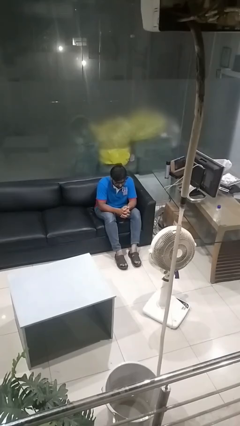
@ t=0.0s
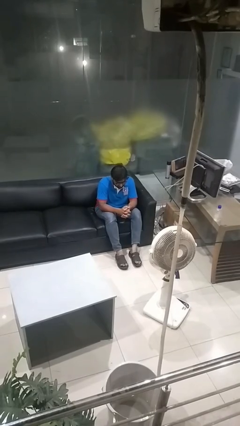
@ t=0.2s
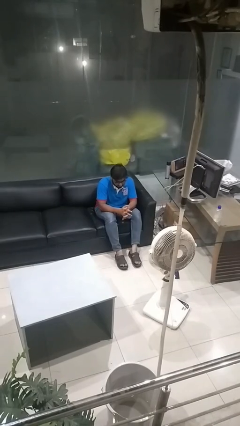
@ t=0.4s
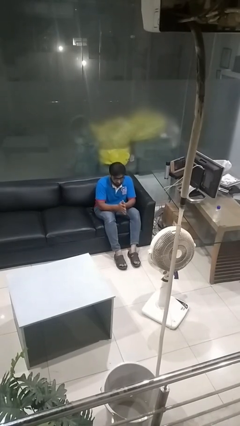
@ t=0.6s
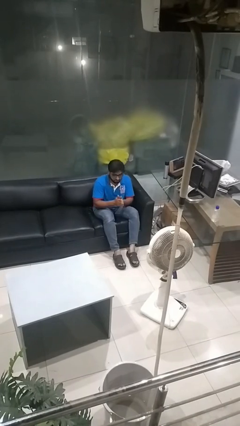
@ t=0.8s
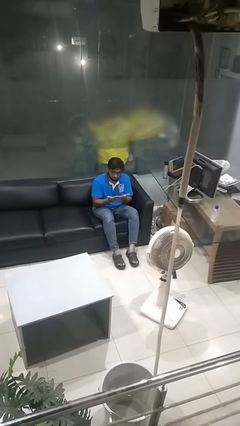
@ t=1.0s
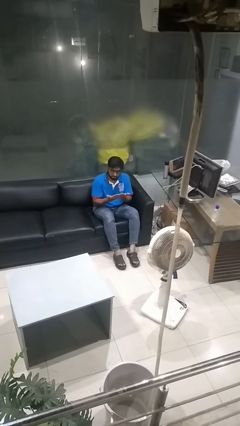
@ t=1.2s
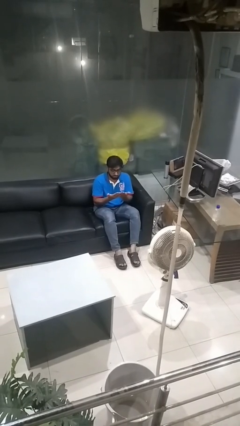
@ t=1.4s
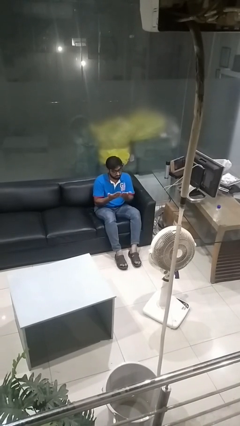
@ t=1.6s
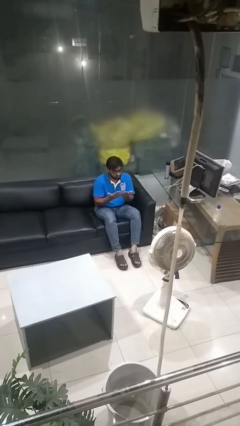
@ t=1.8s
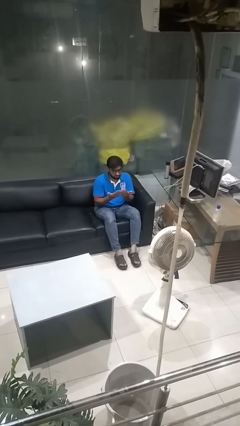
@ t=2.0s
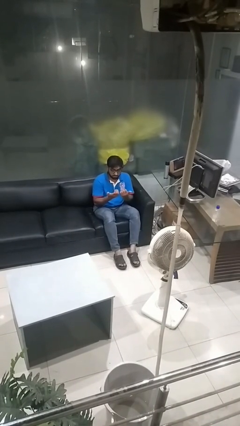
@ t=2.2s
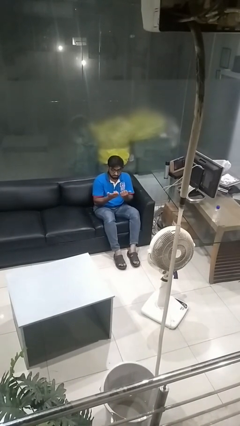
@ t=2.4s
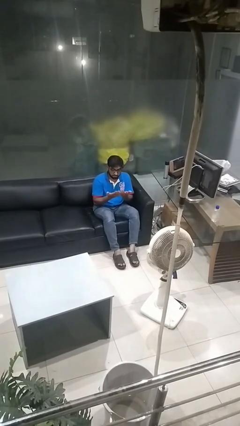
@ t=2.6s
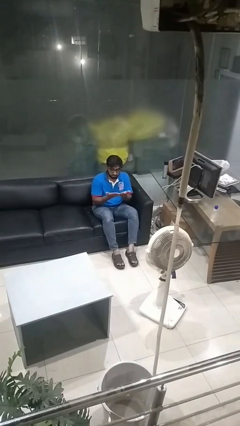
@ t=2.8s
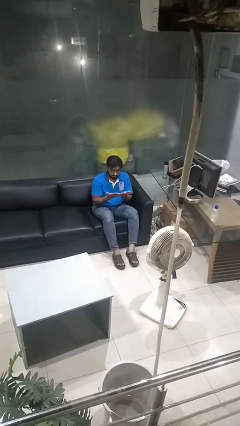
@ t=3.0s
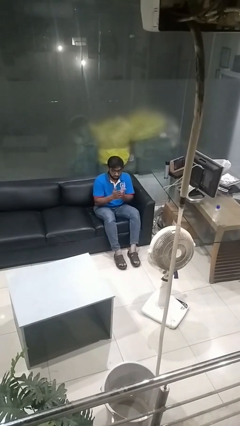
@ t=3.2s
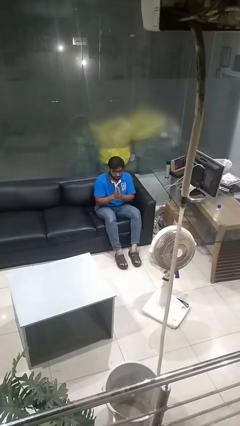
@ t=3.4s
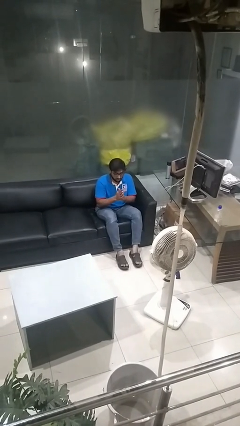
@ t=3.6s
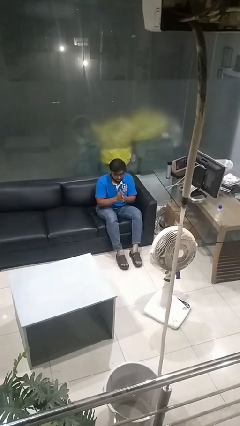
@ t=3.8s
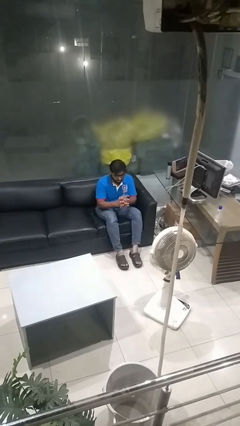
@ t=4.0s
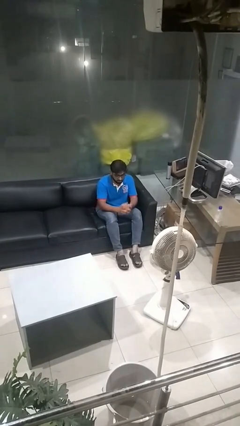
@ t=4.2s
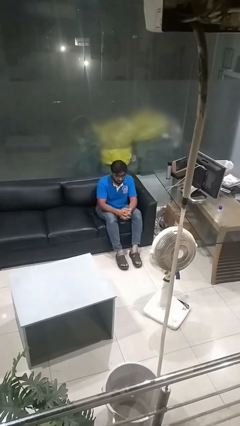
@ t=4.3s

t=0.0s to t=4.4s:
person looks at hands in lap

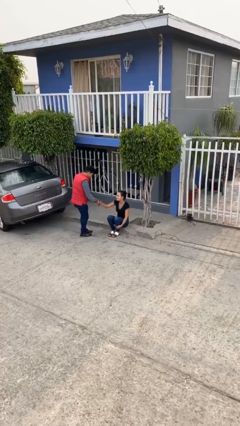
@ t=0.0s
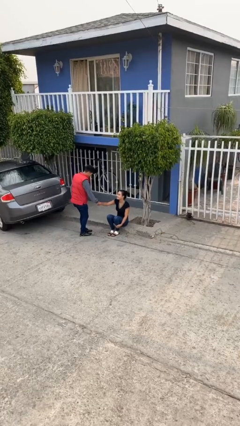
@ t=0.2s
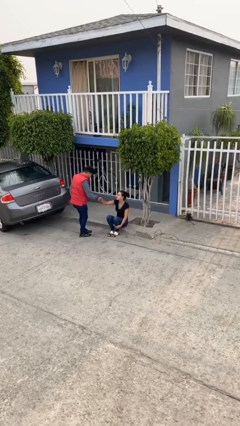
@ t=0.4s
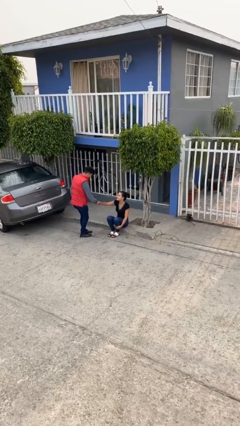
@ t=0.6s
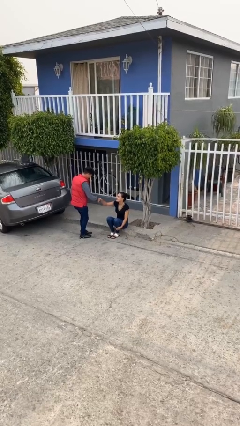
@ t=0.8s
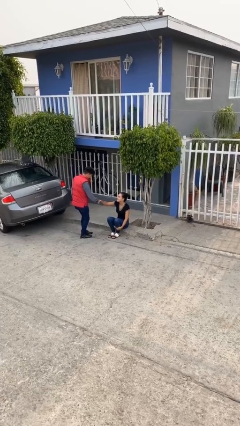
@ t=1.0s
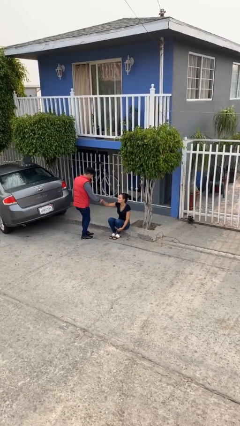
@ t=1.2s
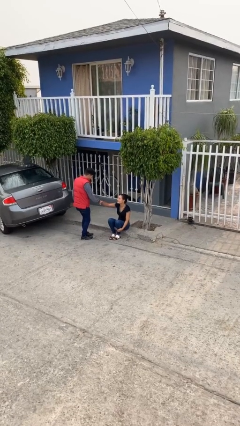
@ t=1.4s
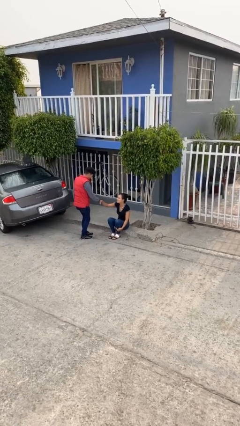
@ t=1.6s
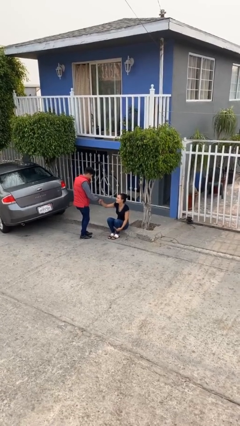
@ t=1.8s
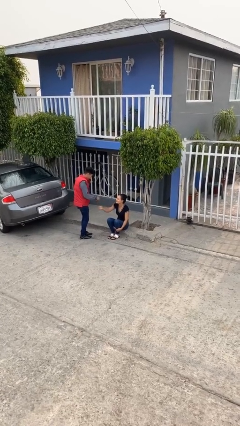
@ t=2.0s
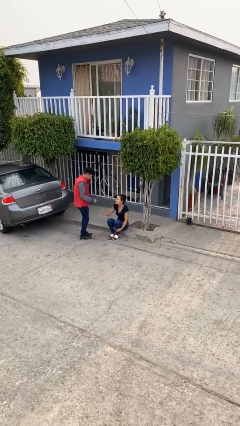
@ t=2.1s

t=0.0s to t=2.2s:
person shakes hand

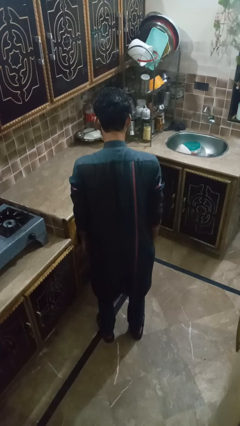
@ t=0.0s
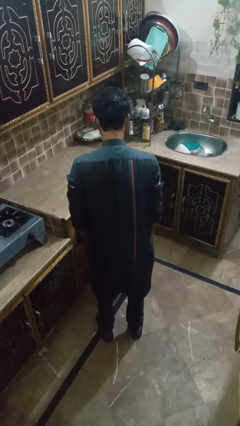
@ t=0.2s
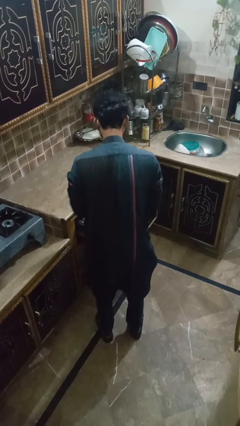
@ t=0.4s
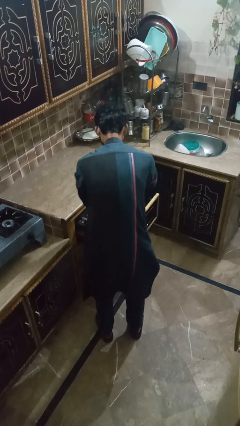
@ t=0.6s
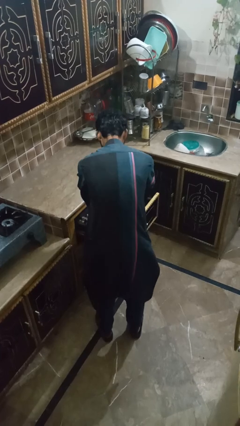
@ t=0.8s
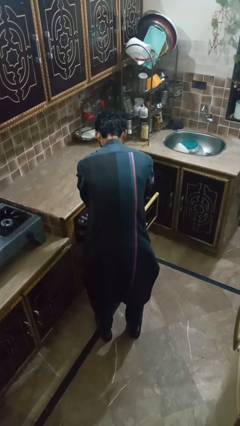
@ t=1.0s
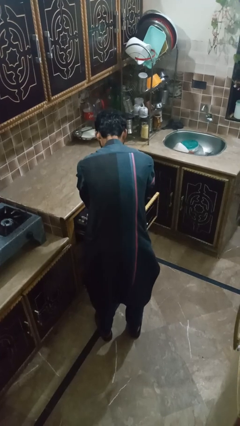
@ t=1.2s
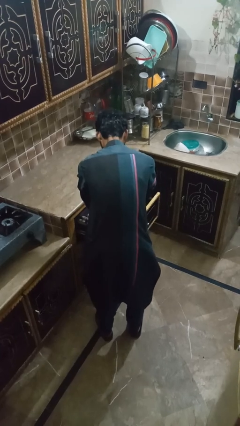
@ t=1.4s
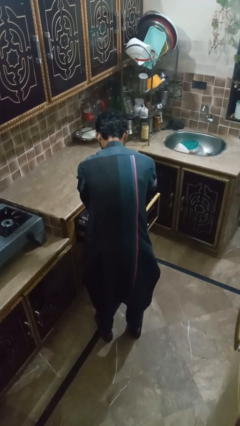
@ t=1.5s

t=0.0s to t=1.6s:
person searches in kitchen drawer

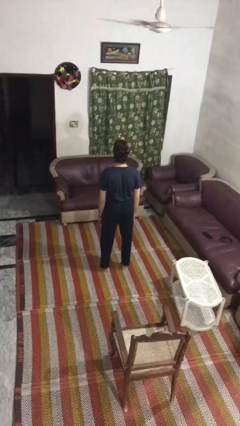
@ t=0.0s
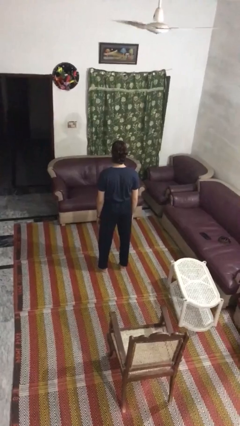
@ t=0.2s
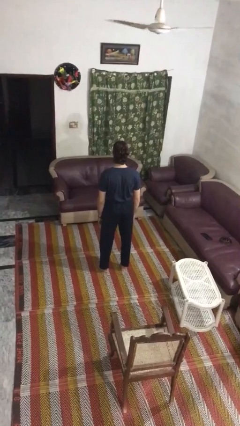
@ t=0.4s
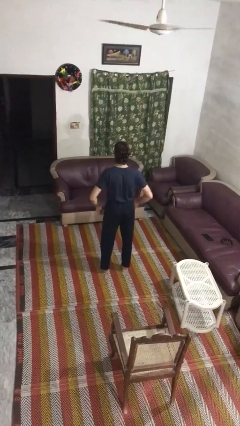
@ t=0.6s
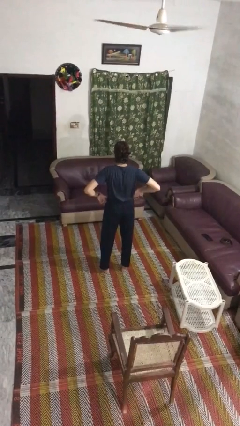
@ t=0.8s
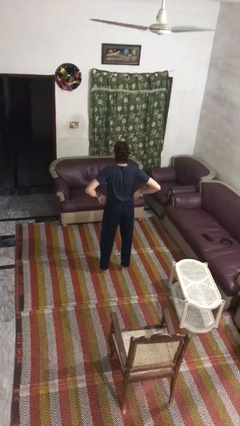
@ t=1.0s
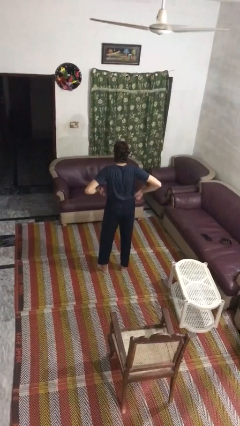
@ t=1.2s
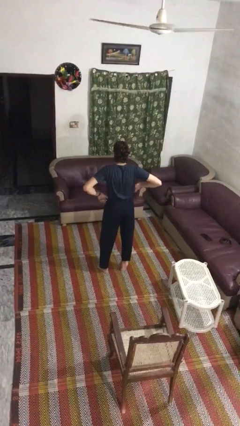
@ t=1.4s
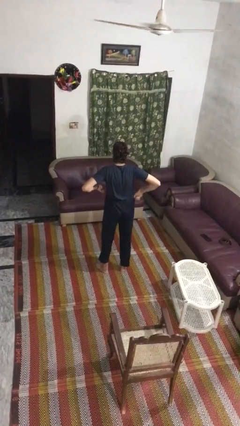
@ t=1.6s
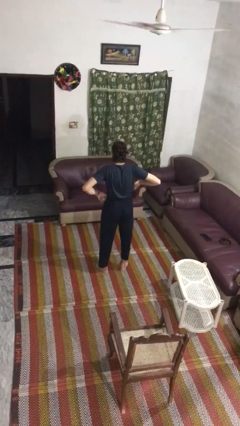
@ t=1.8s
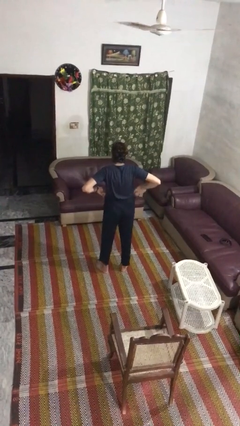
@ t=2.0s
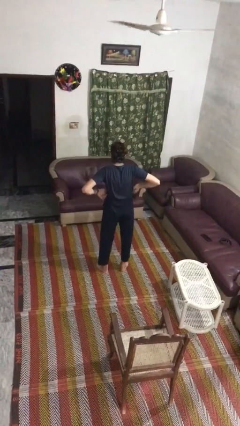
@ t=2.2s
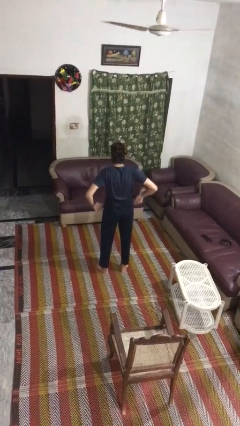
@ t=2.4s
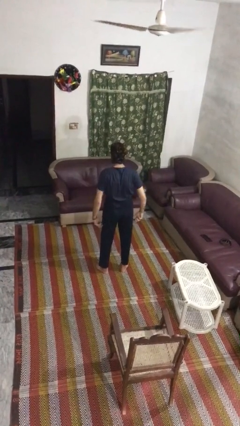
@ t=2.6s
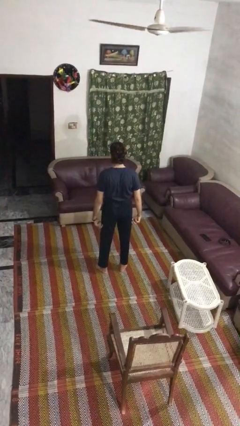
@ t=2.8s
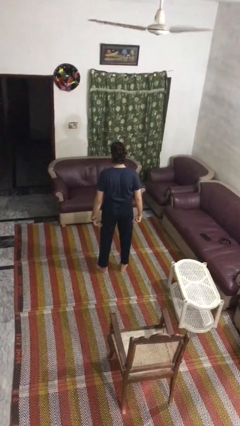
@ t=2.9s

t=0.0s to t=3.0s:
person hikes up pants

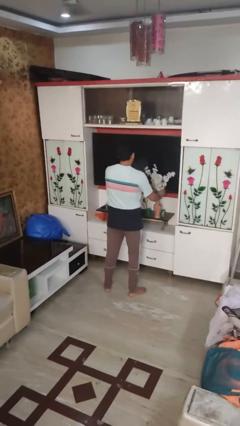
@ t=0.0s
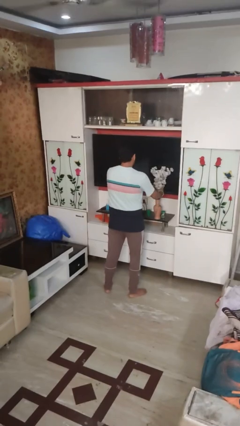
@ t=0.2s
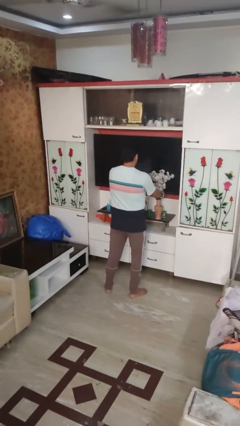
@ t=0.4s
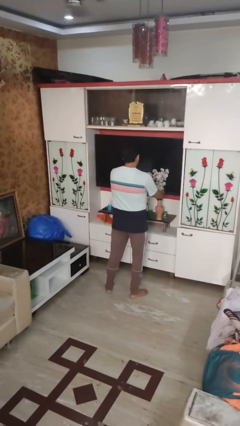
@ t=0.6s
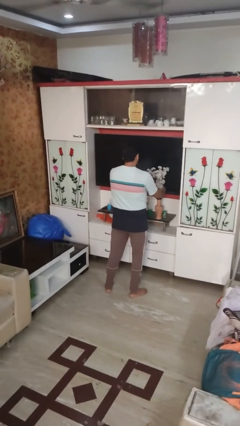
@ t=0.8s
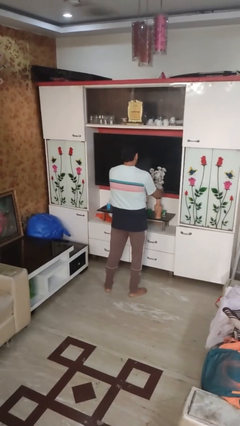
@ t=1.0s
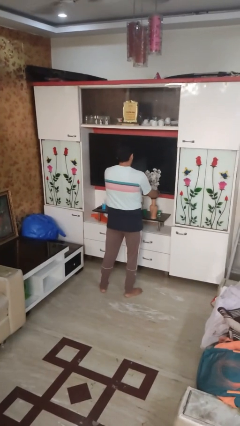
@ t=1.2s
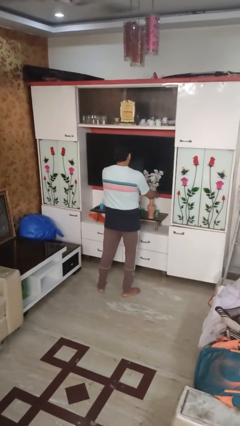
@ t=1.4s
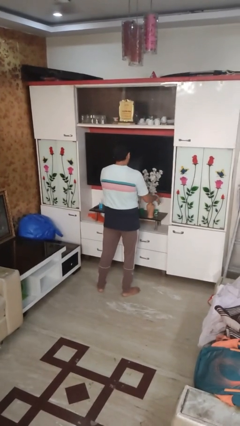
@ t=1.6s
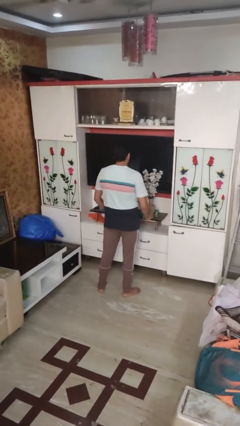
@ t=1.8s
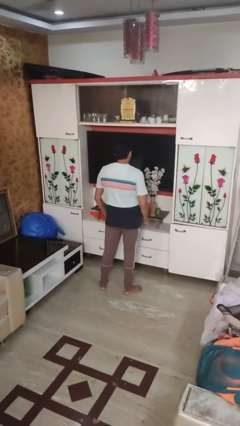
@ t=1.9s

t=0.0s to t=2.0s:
person arranges flowers in vase

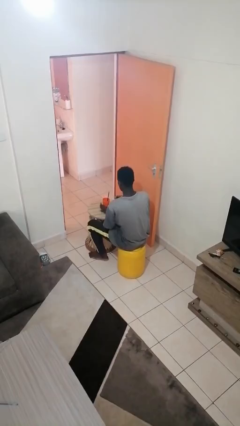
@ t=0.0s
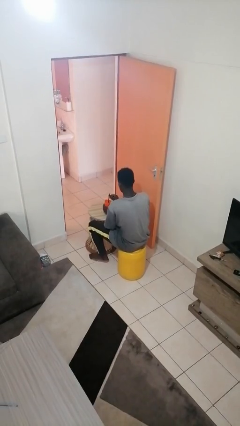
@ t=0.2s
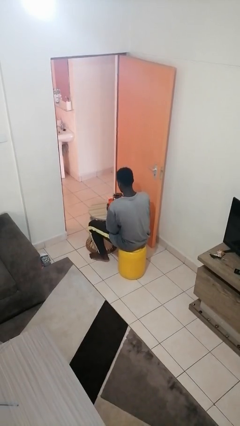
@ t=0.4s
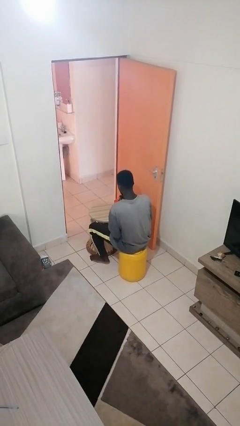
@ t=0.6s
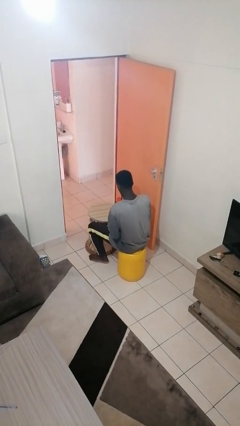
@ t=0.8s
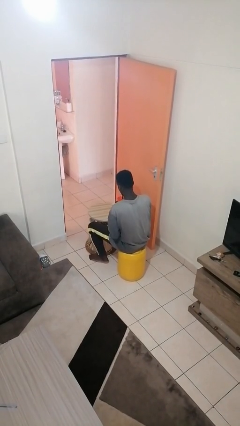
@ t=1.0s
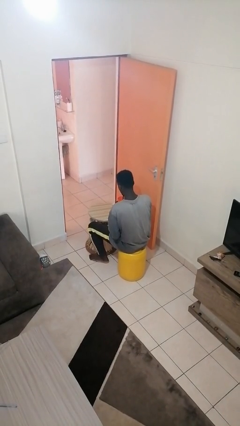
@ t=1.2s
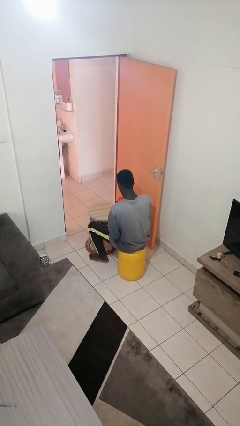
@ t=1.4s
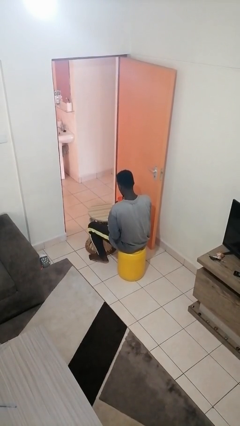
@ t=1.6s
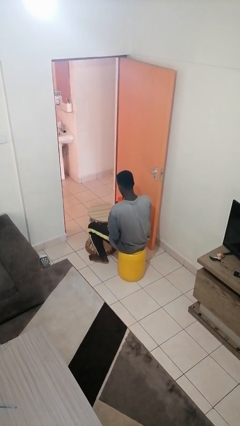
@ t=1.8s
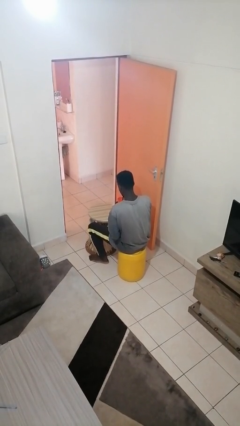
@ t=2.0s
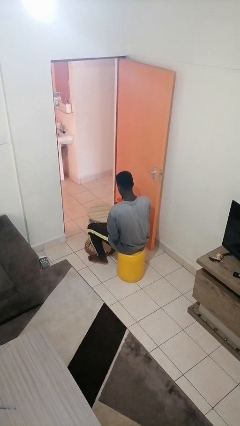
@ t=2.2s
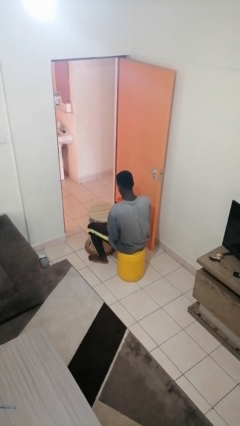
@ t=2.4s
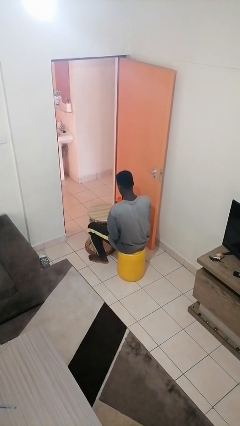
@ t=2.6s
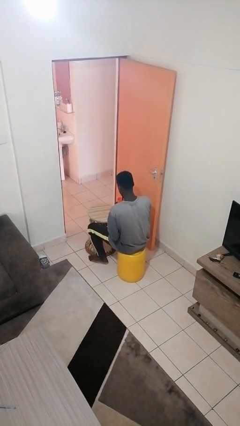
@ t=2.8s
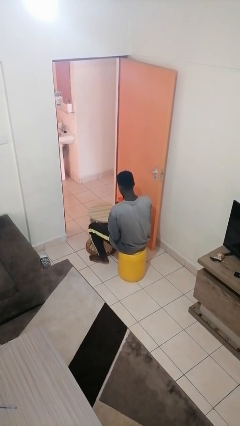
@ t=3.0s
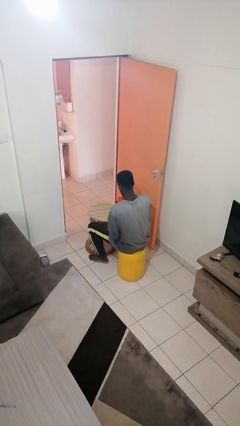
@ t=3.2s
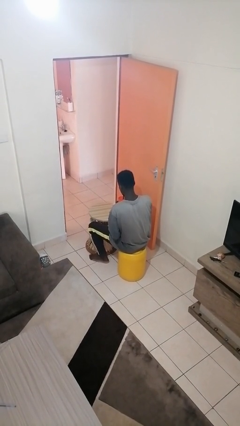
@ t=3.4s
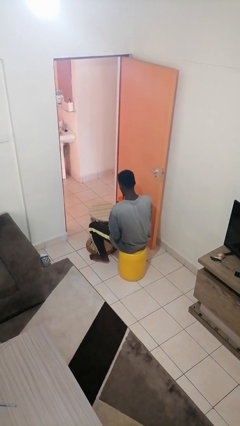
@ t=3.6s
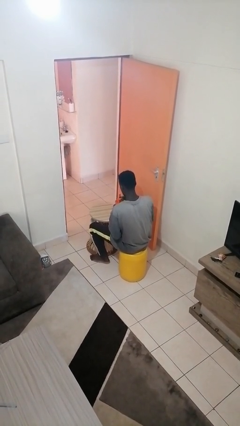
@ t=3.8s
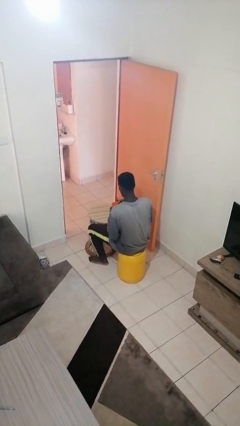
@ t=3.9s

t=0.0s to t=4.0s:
person drinks from straw

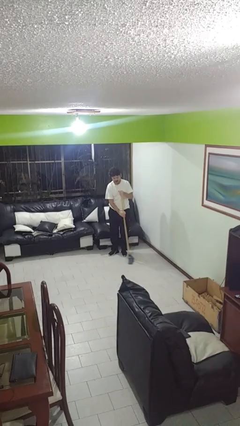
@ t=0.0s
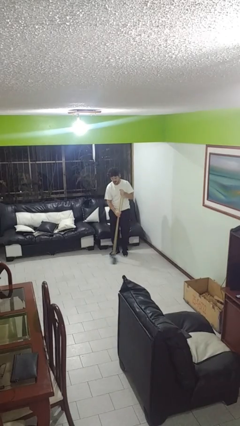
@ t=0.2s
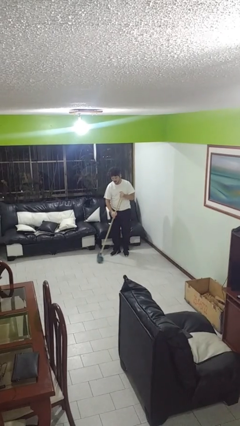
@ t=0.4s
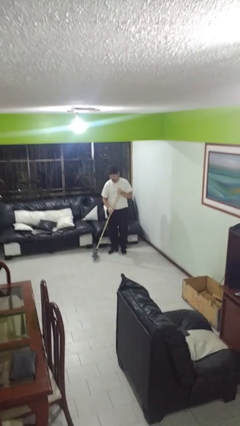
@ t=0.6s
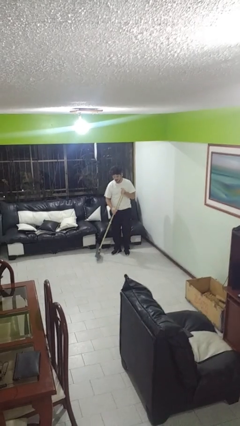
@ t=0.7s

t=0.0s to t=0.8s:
person sweeps floor
